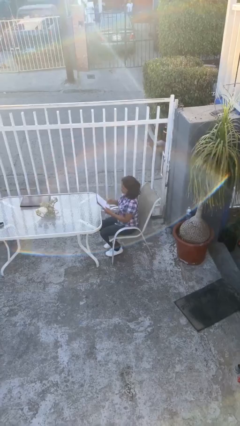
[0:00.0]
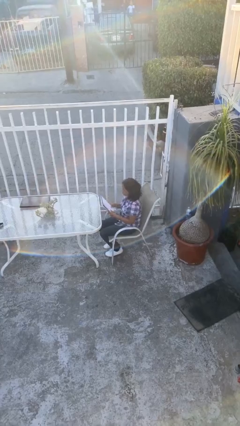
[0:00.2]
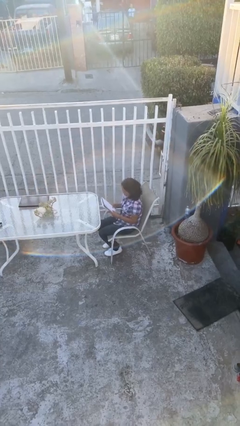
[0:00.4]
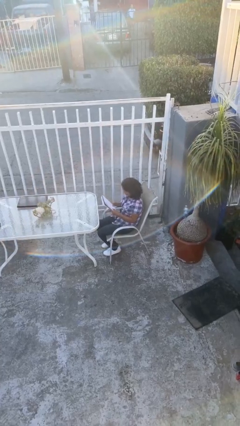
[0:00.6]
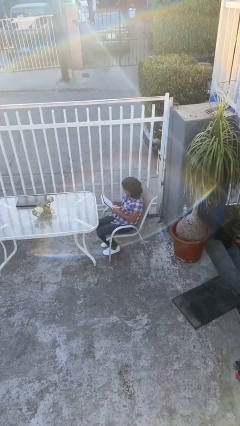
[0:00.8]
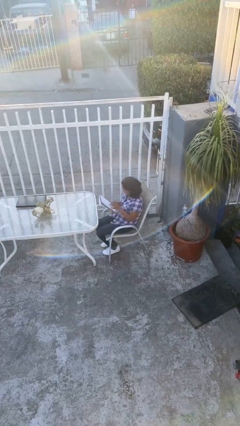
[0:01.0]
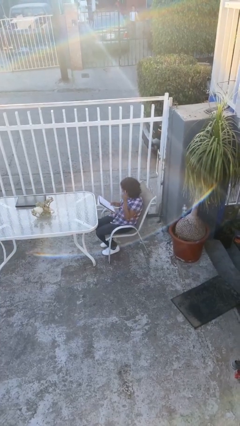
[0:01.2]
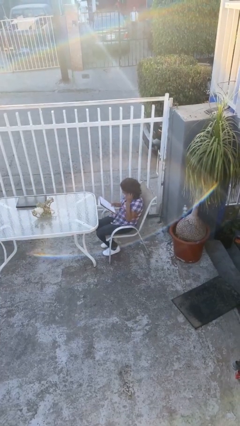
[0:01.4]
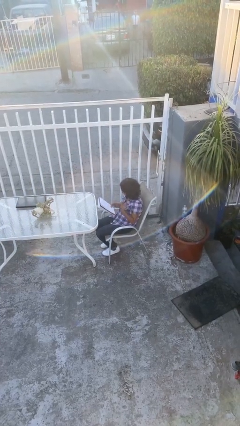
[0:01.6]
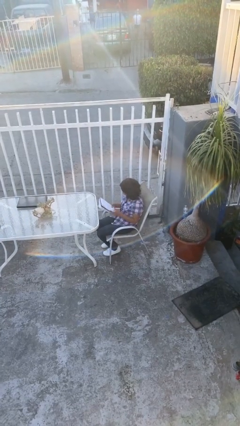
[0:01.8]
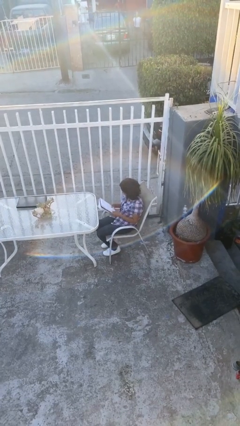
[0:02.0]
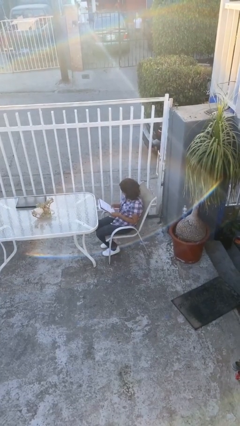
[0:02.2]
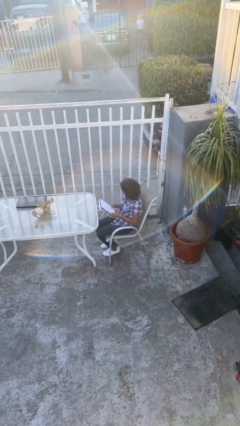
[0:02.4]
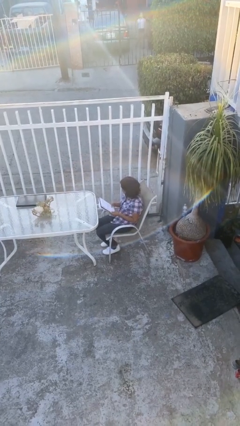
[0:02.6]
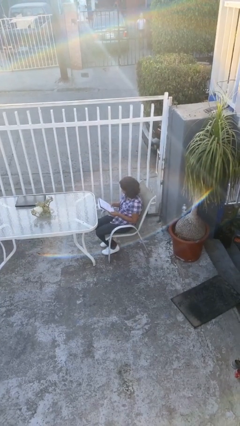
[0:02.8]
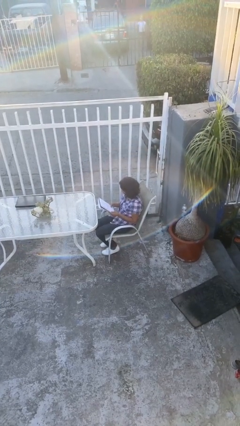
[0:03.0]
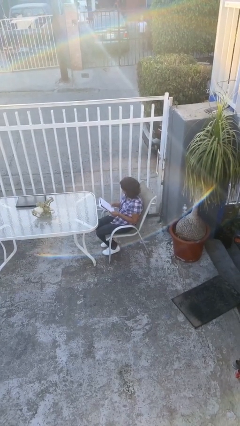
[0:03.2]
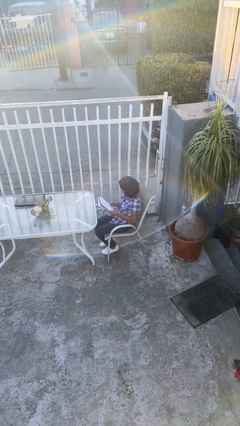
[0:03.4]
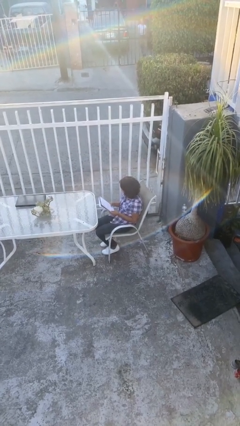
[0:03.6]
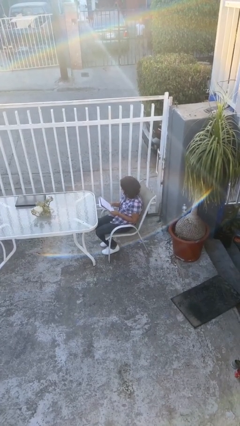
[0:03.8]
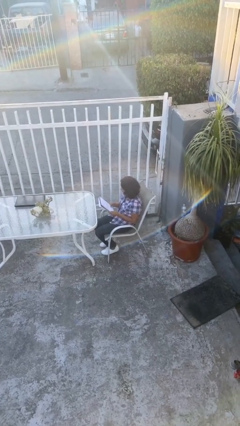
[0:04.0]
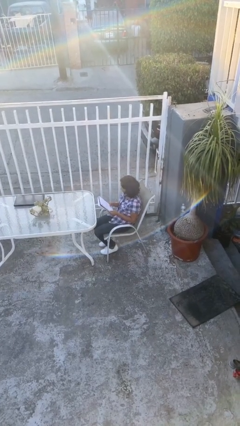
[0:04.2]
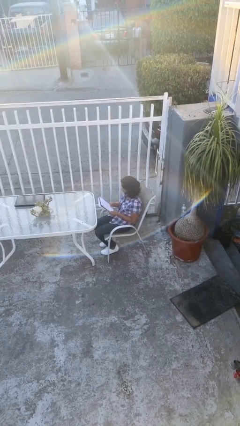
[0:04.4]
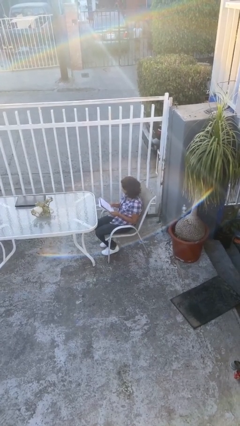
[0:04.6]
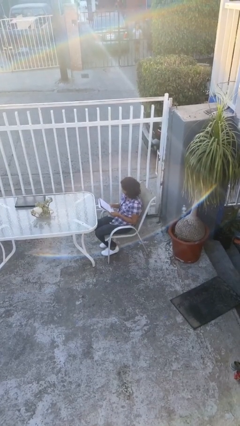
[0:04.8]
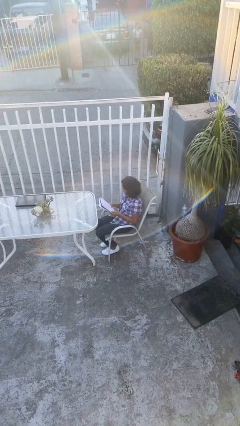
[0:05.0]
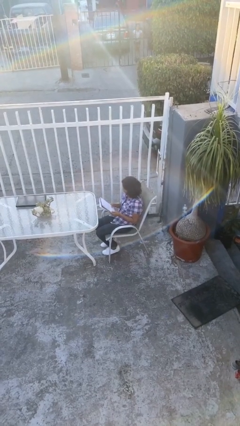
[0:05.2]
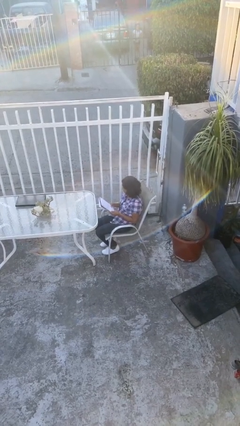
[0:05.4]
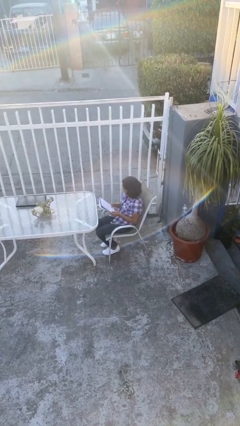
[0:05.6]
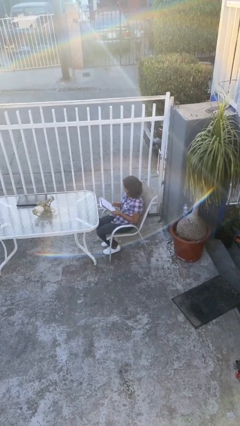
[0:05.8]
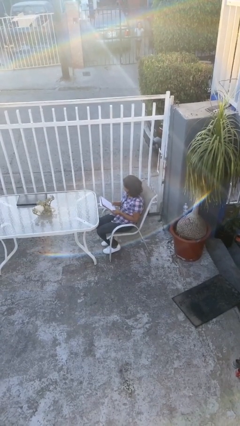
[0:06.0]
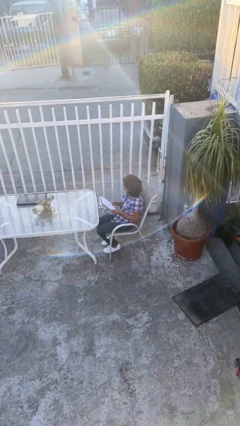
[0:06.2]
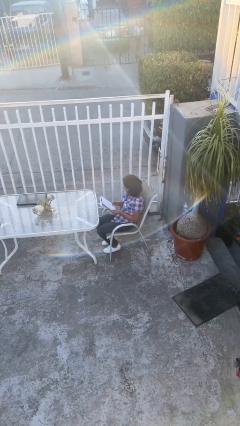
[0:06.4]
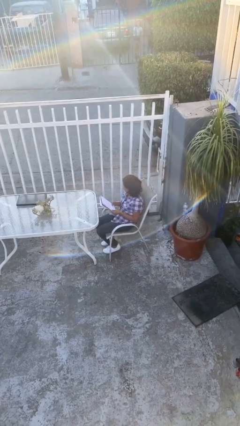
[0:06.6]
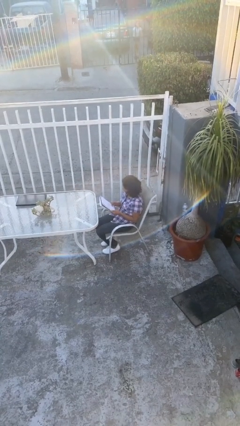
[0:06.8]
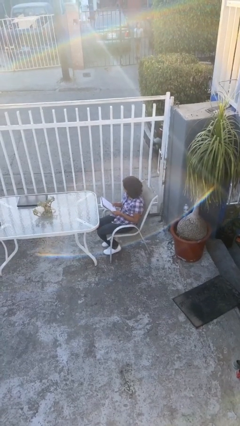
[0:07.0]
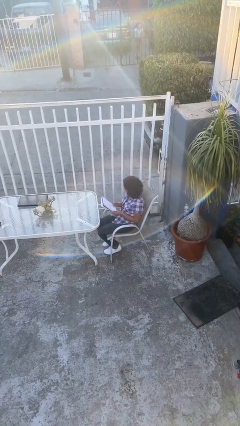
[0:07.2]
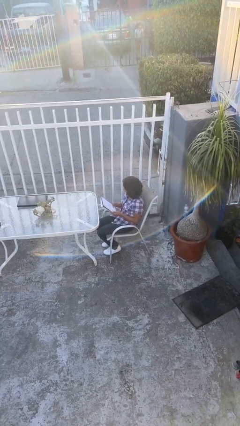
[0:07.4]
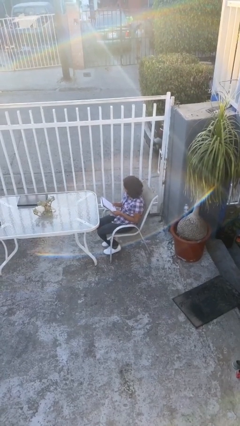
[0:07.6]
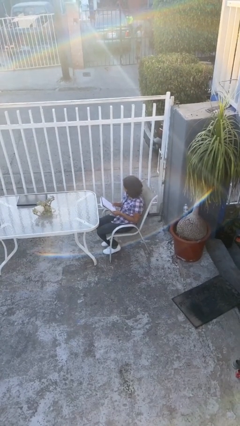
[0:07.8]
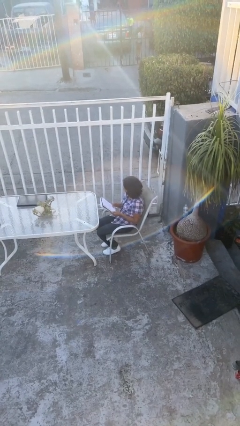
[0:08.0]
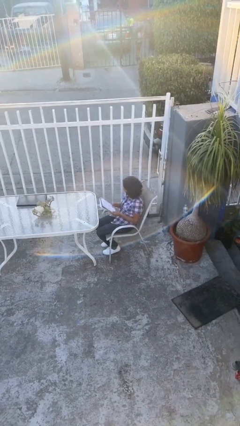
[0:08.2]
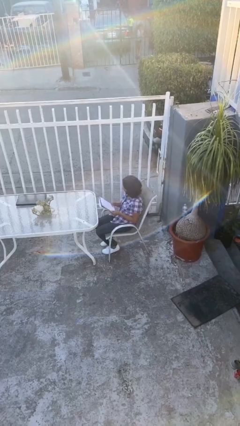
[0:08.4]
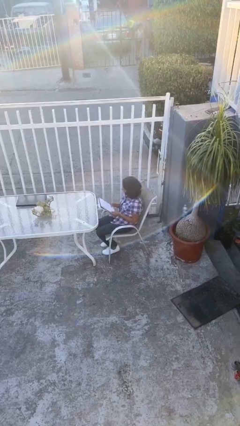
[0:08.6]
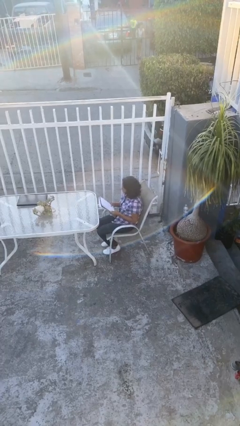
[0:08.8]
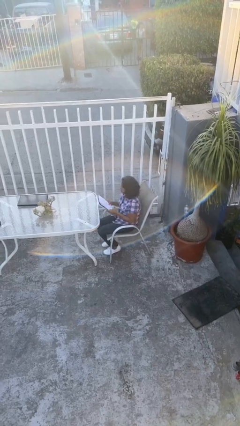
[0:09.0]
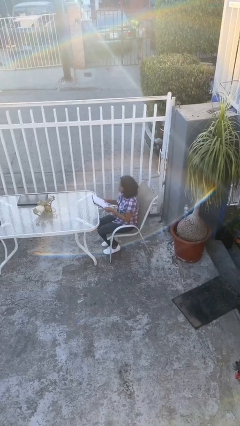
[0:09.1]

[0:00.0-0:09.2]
person reads document

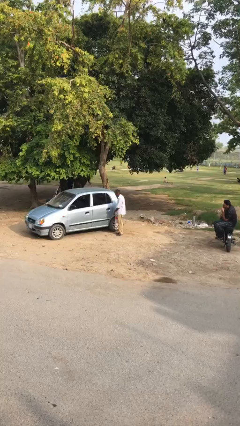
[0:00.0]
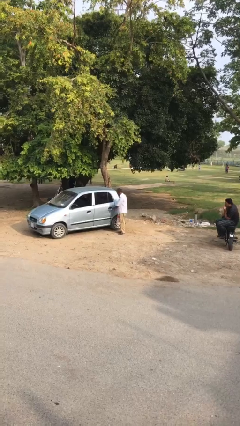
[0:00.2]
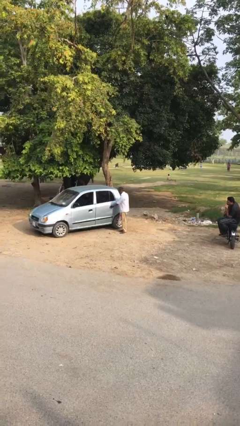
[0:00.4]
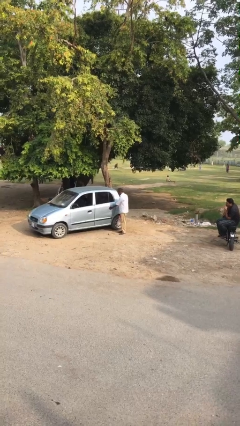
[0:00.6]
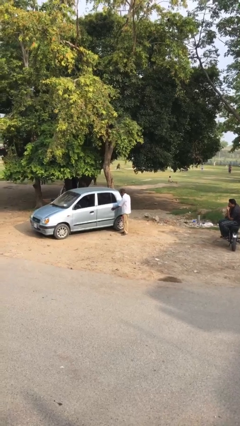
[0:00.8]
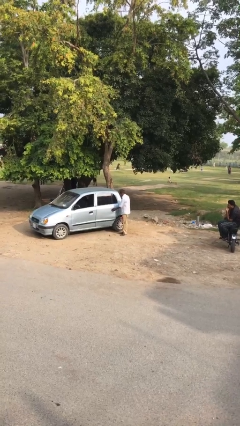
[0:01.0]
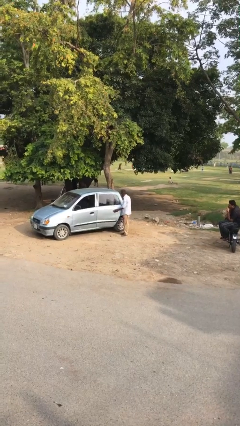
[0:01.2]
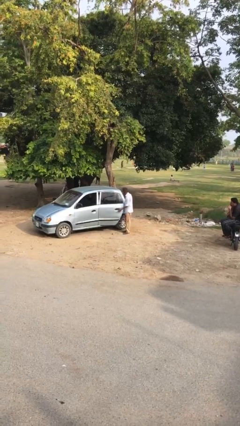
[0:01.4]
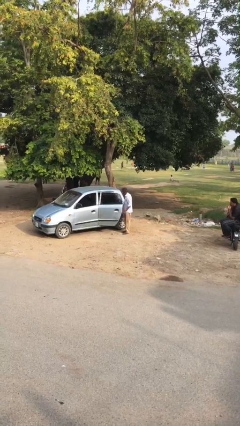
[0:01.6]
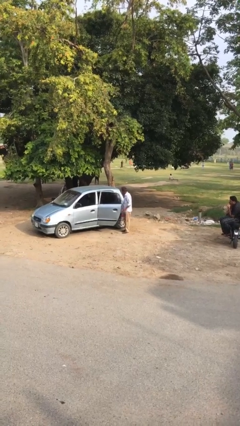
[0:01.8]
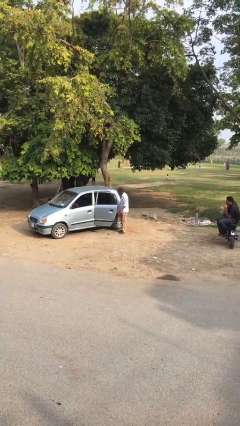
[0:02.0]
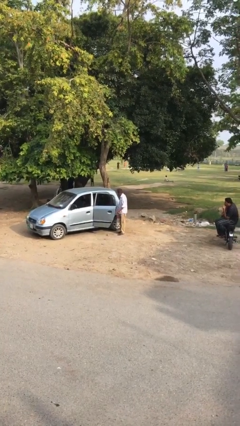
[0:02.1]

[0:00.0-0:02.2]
person opens car door

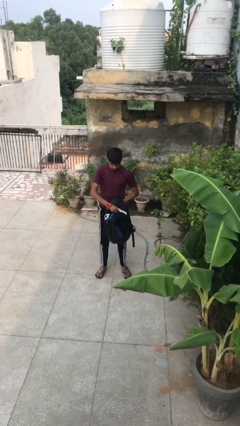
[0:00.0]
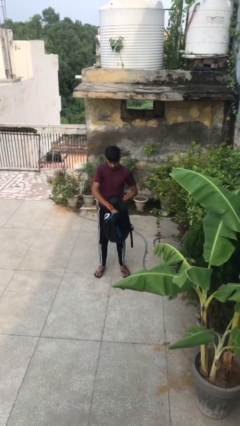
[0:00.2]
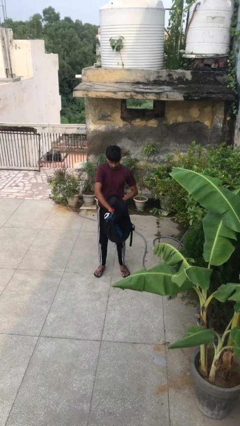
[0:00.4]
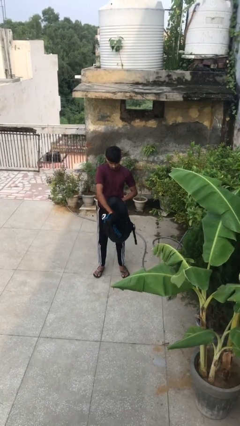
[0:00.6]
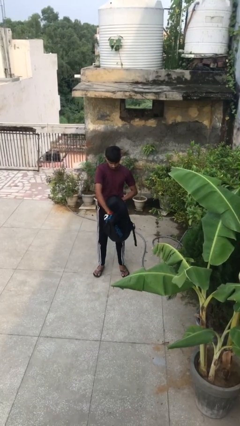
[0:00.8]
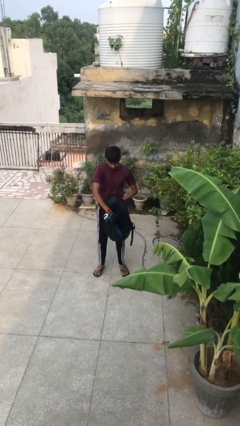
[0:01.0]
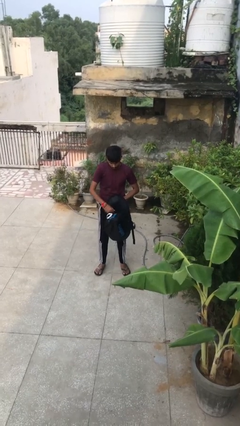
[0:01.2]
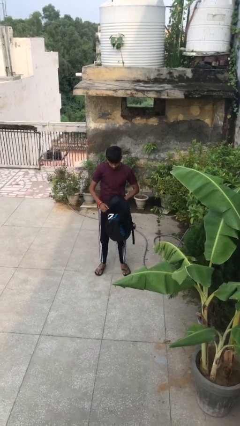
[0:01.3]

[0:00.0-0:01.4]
person puts object into backpack

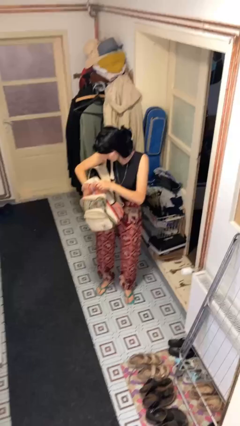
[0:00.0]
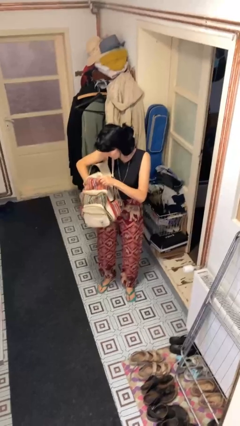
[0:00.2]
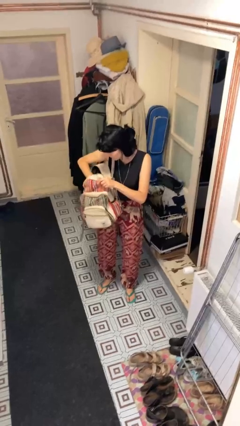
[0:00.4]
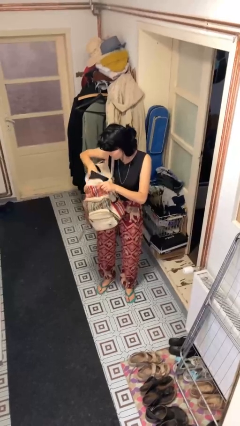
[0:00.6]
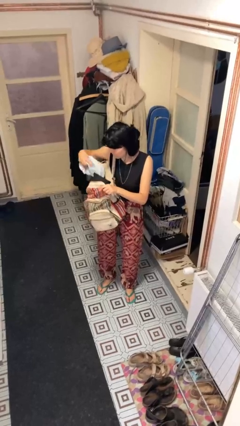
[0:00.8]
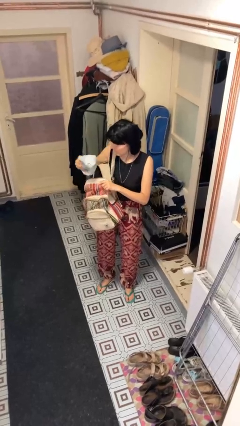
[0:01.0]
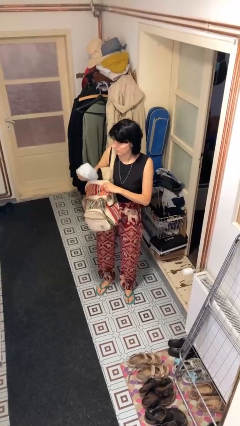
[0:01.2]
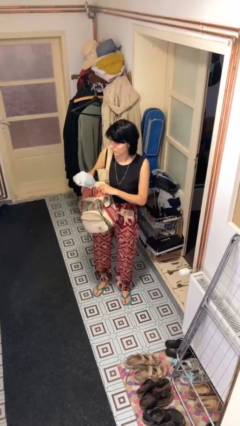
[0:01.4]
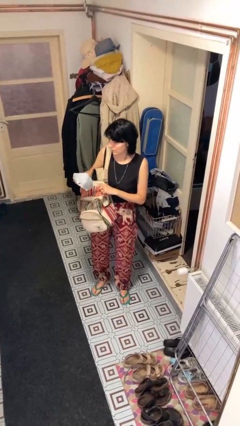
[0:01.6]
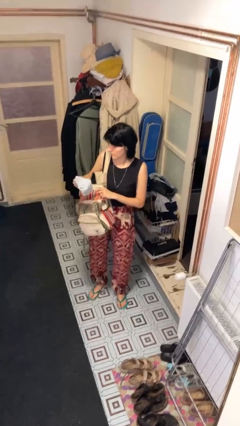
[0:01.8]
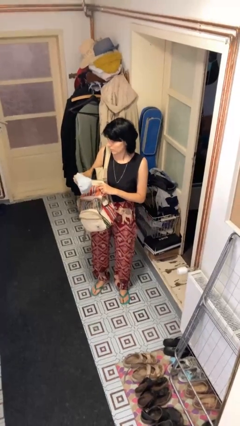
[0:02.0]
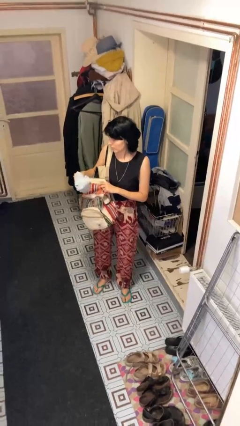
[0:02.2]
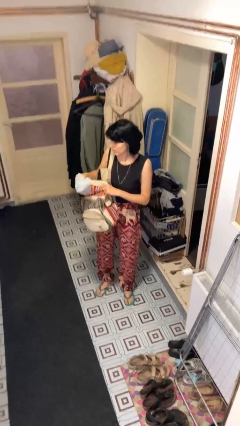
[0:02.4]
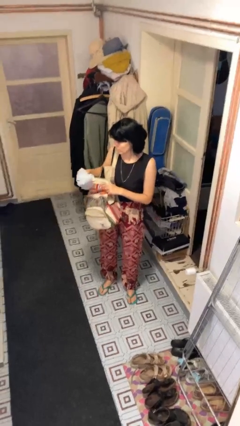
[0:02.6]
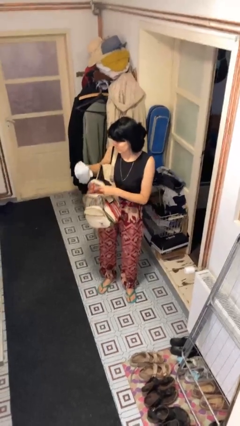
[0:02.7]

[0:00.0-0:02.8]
person takes object from backpack

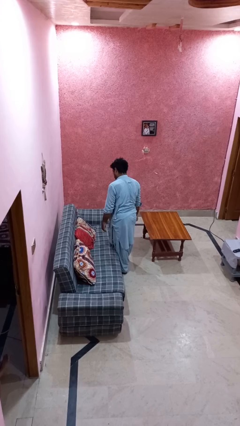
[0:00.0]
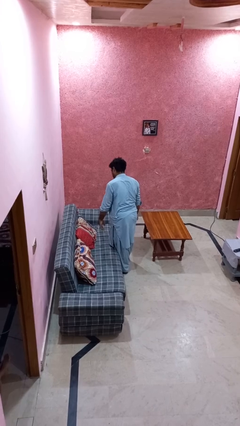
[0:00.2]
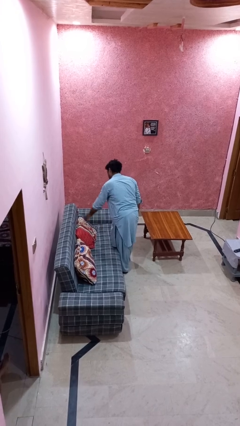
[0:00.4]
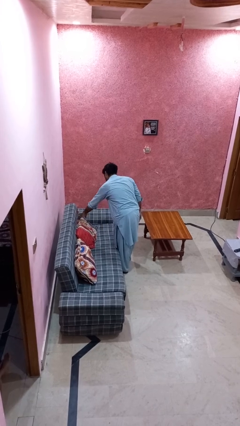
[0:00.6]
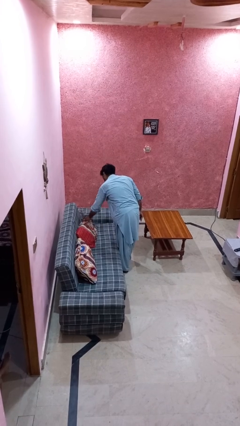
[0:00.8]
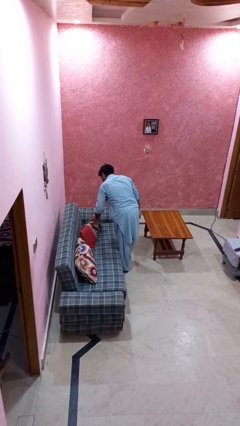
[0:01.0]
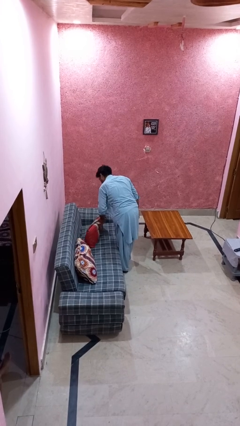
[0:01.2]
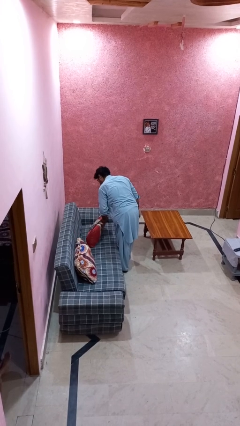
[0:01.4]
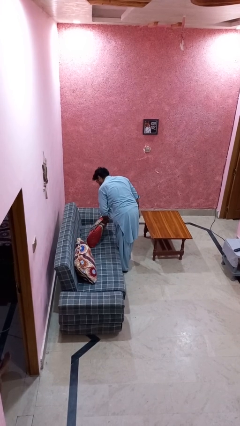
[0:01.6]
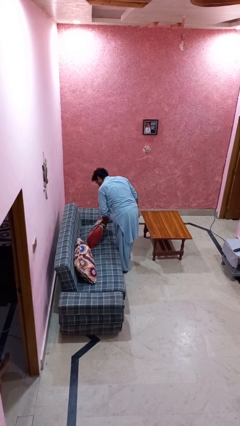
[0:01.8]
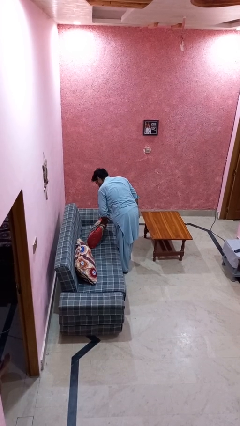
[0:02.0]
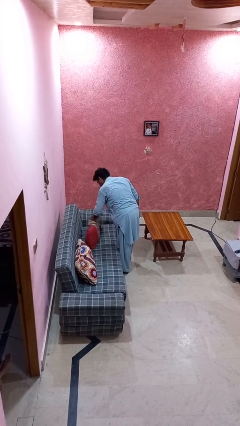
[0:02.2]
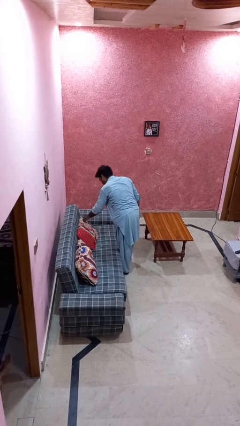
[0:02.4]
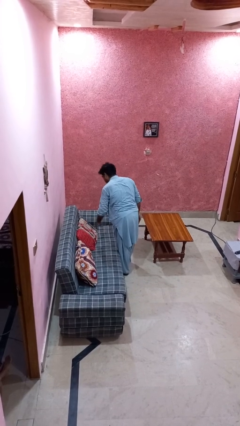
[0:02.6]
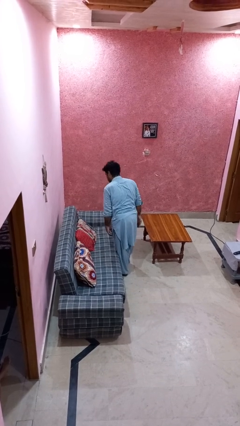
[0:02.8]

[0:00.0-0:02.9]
person searches in couch
